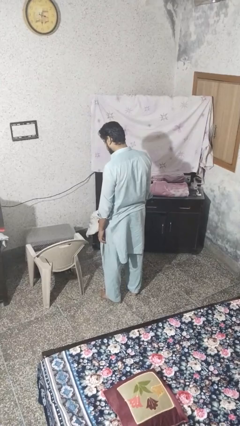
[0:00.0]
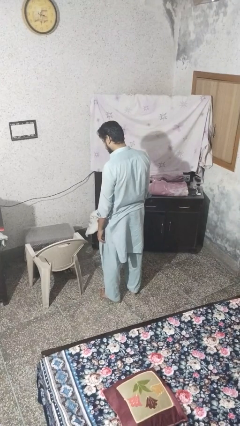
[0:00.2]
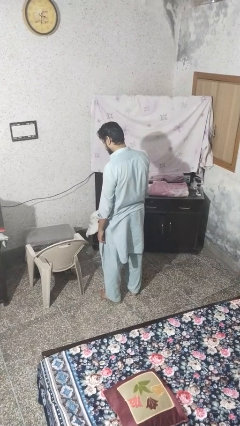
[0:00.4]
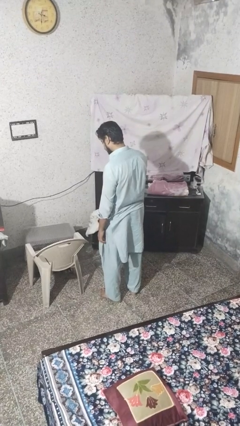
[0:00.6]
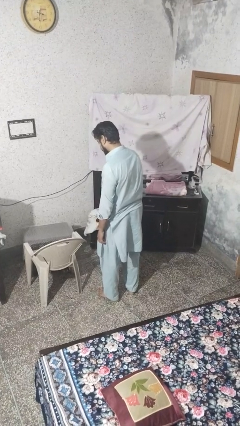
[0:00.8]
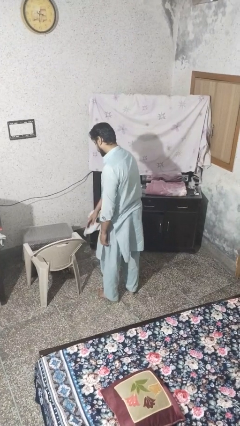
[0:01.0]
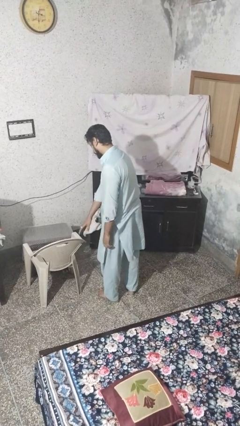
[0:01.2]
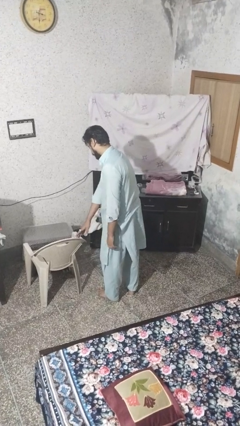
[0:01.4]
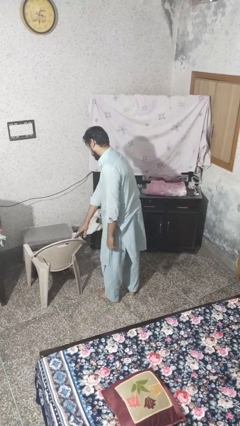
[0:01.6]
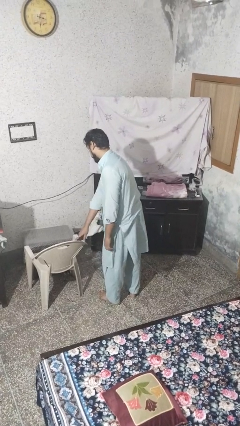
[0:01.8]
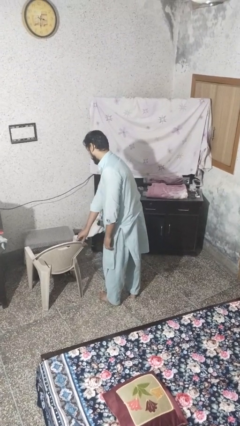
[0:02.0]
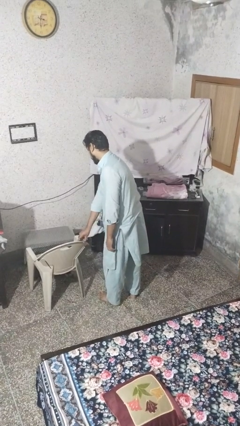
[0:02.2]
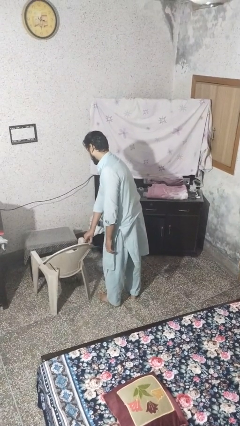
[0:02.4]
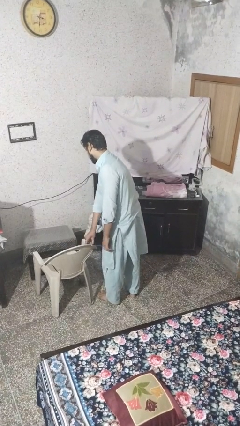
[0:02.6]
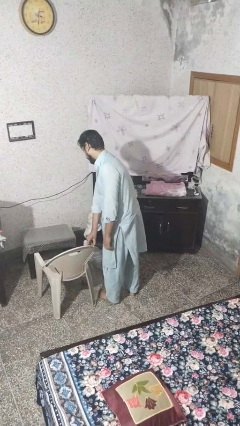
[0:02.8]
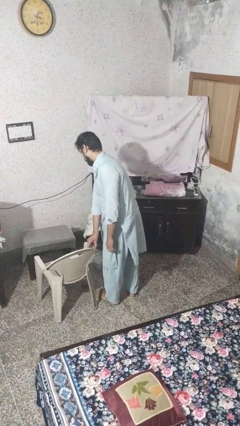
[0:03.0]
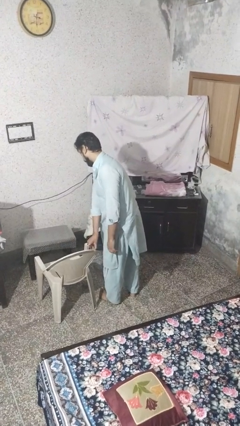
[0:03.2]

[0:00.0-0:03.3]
person pulls out chair

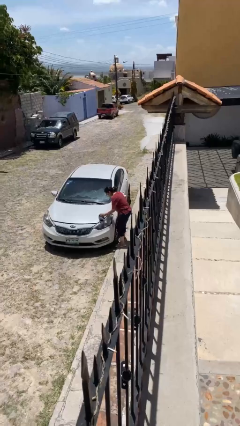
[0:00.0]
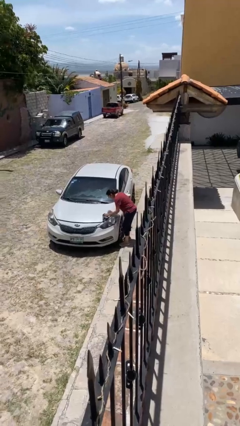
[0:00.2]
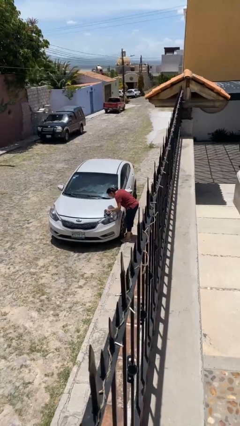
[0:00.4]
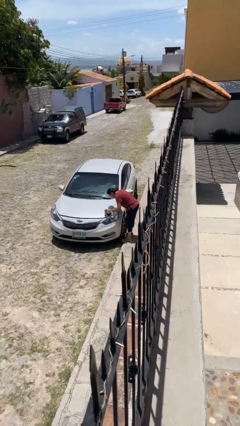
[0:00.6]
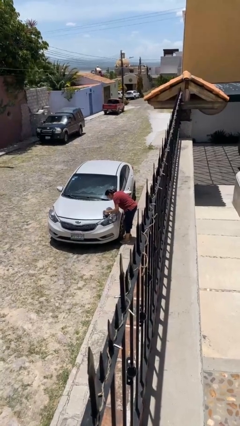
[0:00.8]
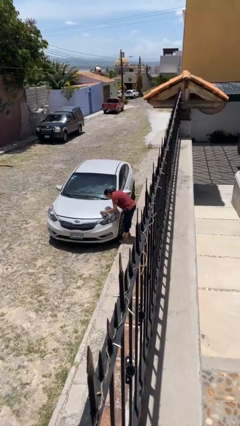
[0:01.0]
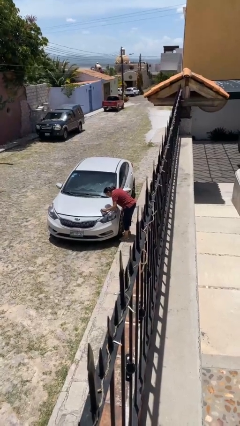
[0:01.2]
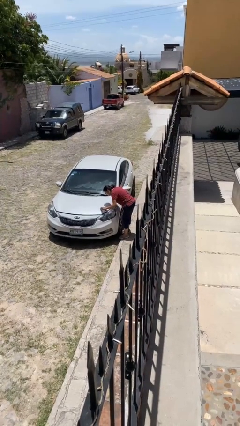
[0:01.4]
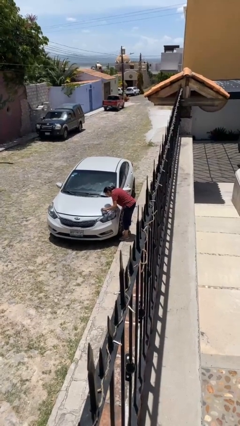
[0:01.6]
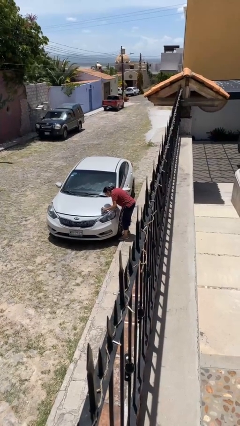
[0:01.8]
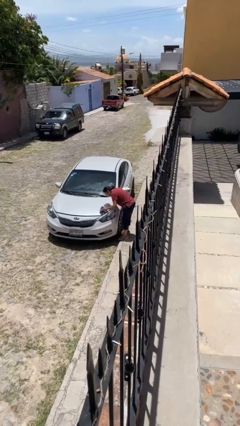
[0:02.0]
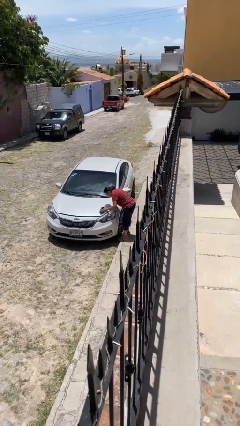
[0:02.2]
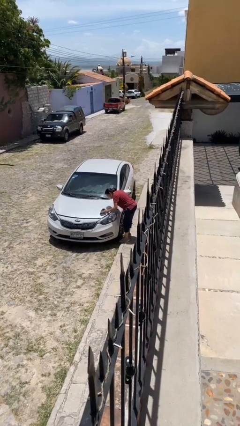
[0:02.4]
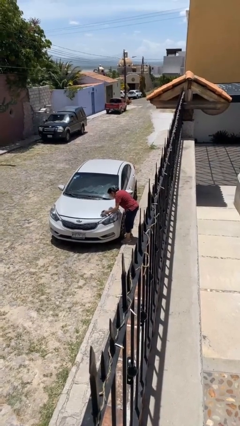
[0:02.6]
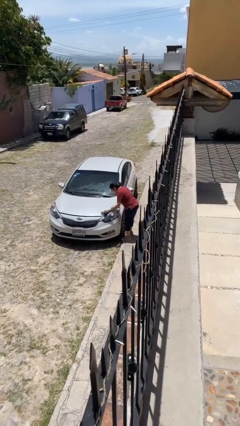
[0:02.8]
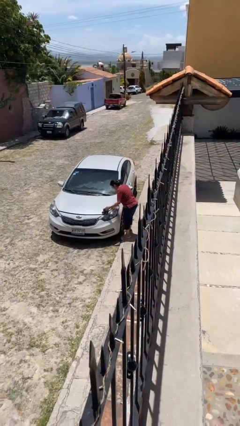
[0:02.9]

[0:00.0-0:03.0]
person polishes car with rag

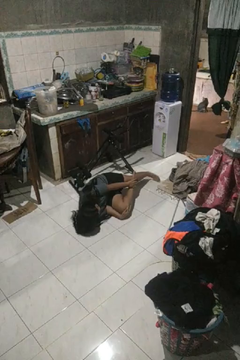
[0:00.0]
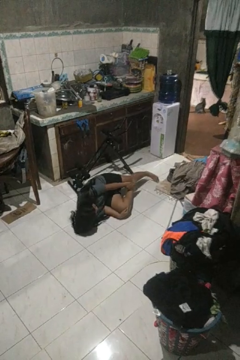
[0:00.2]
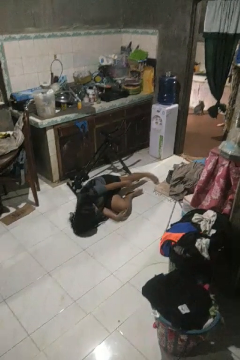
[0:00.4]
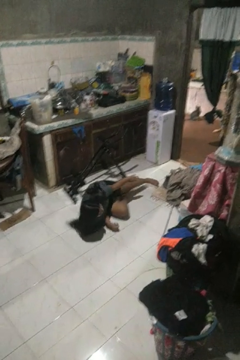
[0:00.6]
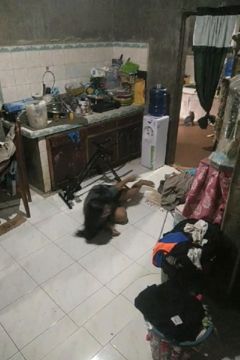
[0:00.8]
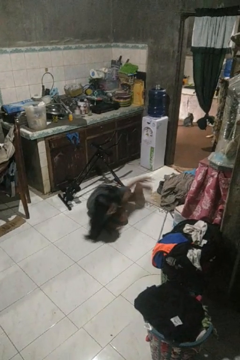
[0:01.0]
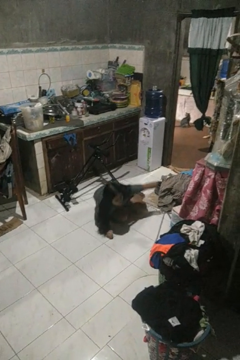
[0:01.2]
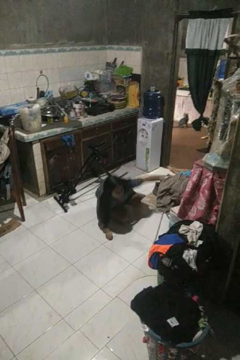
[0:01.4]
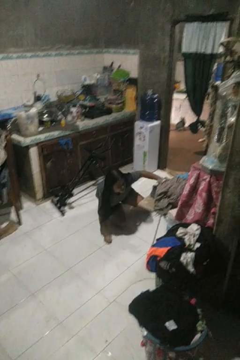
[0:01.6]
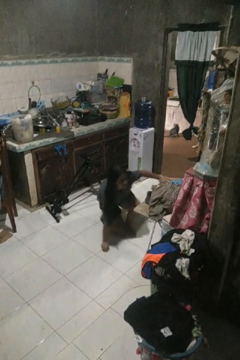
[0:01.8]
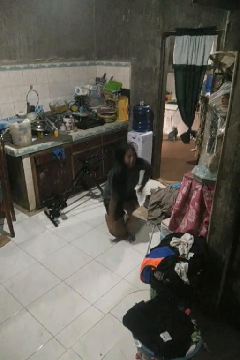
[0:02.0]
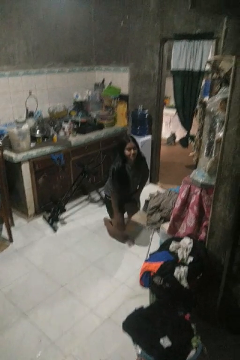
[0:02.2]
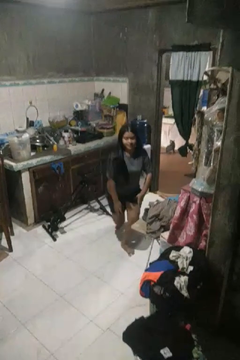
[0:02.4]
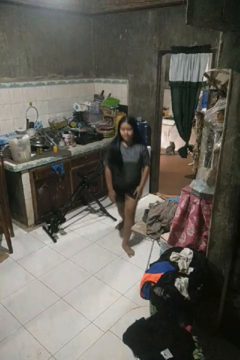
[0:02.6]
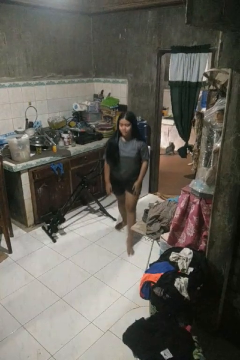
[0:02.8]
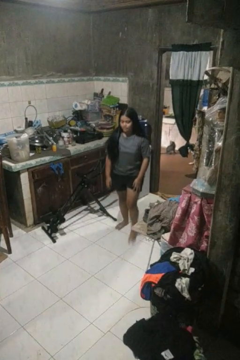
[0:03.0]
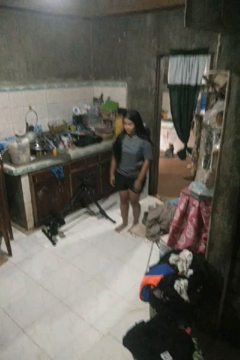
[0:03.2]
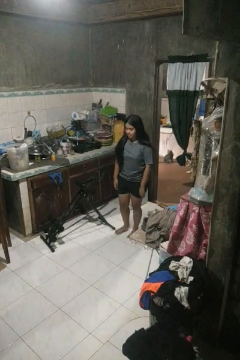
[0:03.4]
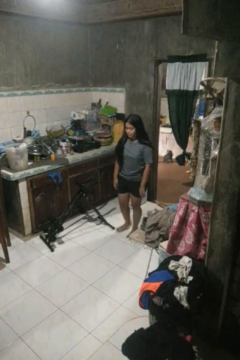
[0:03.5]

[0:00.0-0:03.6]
person stands up from floor

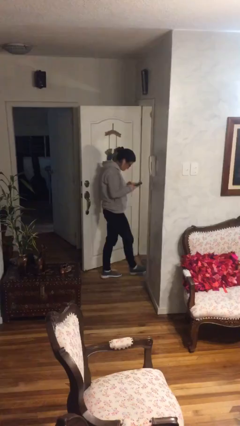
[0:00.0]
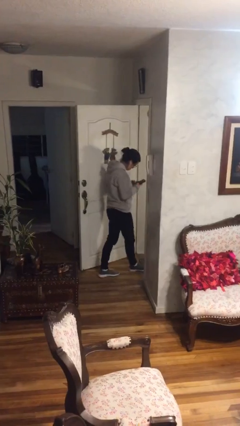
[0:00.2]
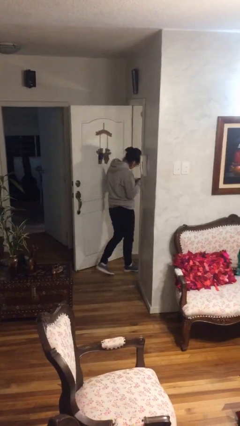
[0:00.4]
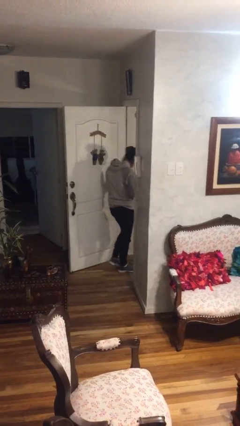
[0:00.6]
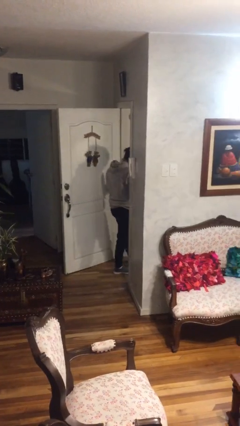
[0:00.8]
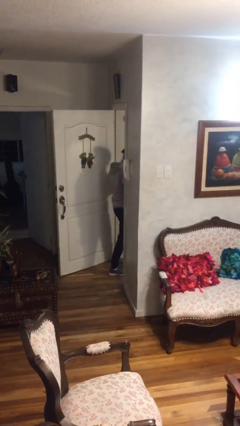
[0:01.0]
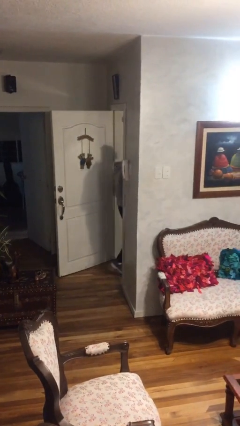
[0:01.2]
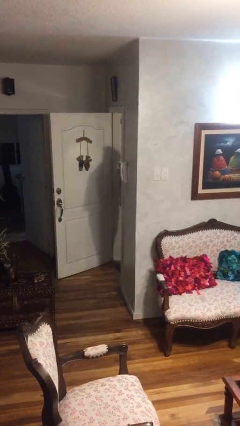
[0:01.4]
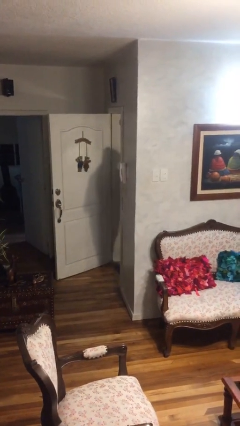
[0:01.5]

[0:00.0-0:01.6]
person exits scene through structure

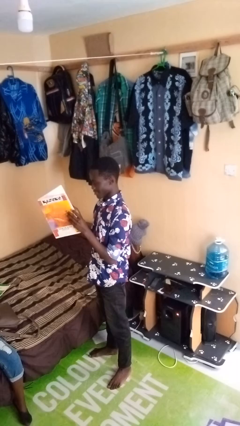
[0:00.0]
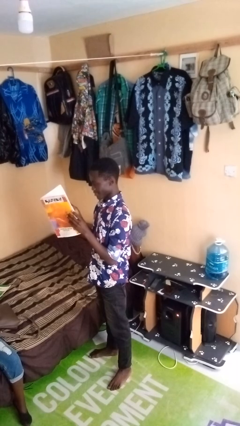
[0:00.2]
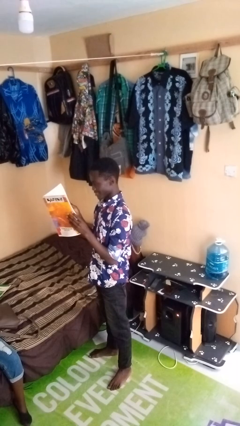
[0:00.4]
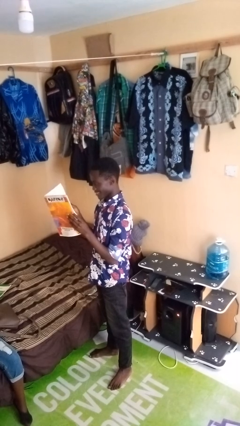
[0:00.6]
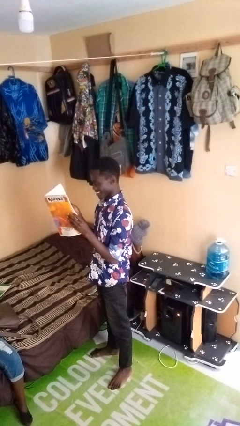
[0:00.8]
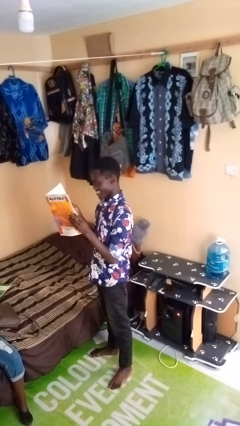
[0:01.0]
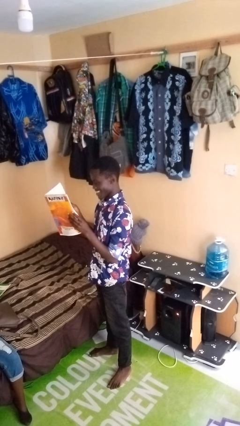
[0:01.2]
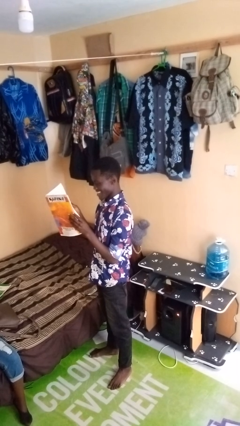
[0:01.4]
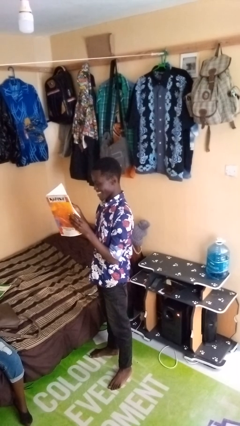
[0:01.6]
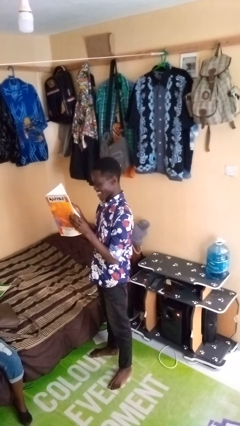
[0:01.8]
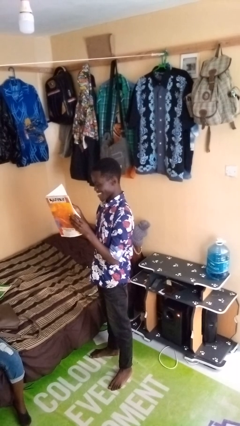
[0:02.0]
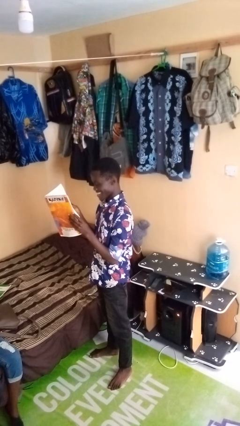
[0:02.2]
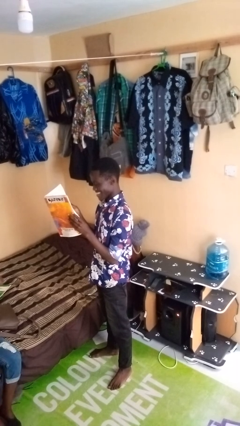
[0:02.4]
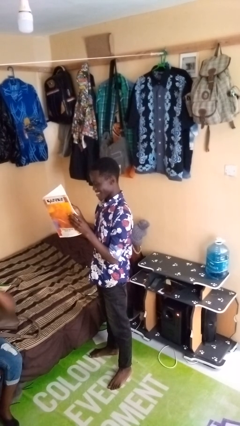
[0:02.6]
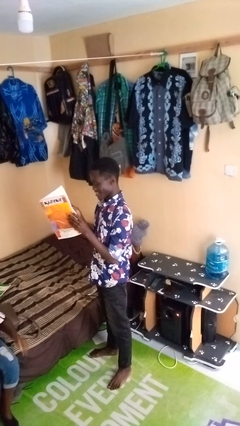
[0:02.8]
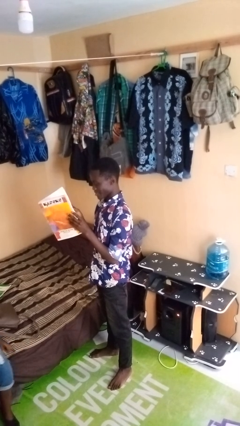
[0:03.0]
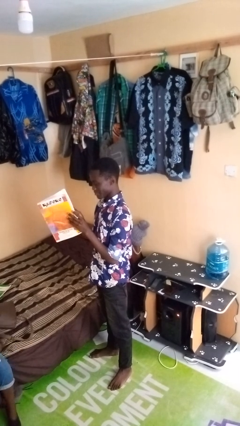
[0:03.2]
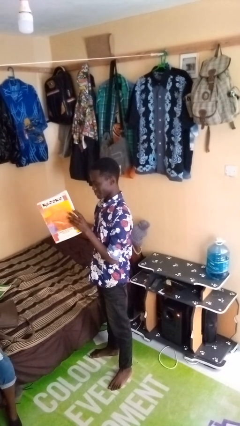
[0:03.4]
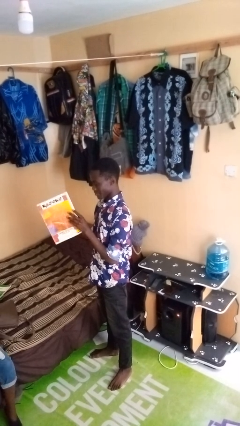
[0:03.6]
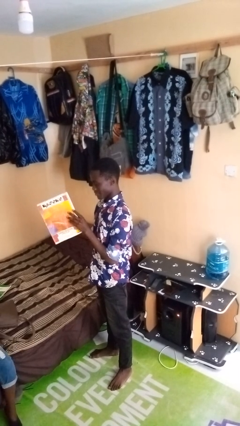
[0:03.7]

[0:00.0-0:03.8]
person reads newspaper

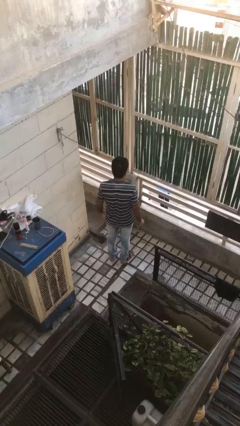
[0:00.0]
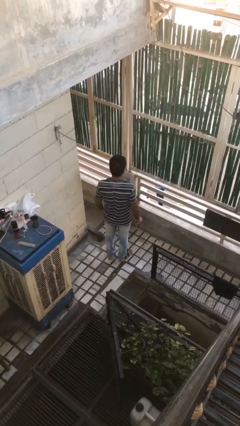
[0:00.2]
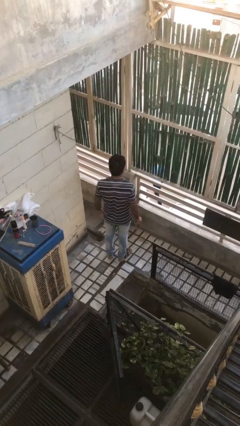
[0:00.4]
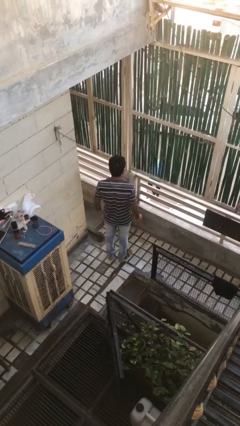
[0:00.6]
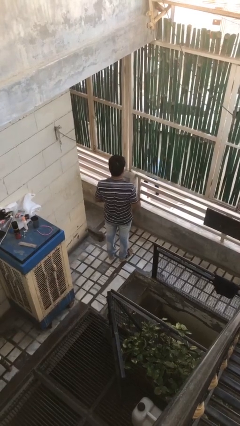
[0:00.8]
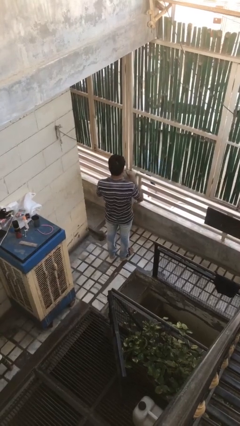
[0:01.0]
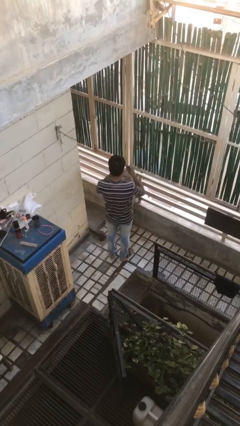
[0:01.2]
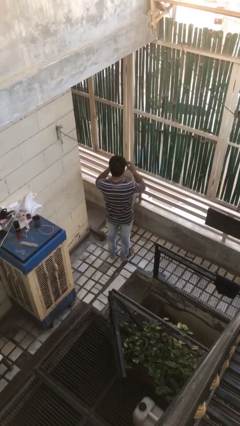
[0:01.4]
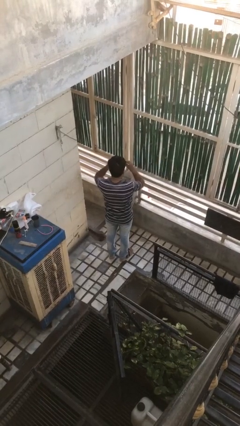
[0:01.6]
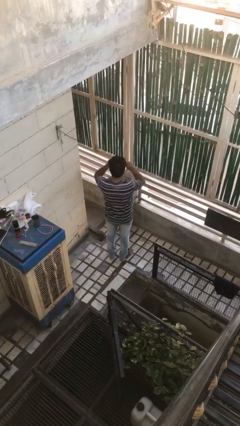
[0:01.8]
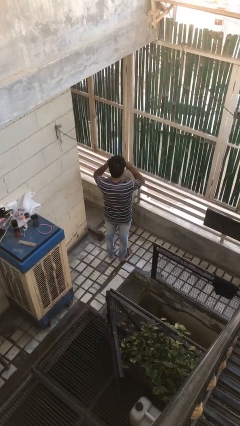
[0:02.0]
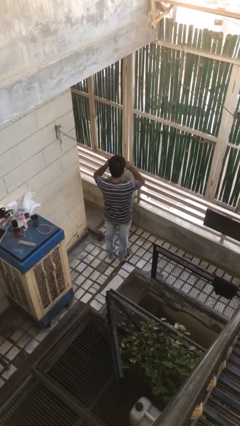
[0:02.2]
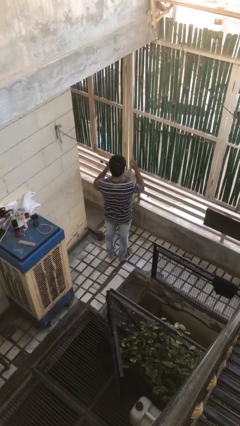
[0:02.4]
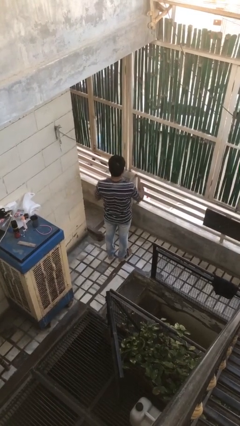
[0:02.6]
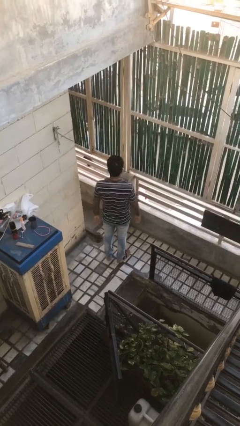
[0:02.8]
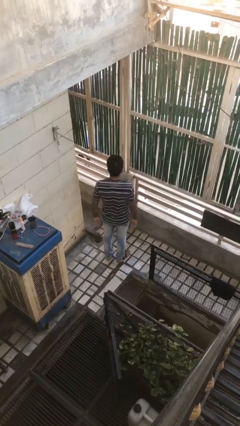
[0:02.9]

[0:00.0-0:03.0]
person puts on sunglasses
